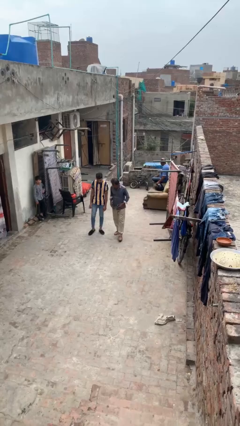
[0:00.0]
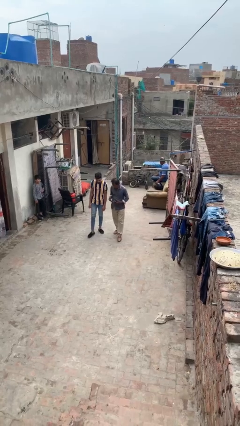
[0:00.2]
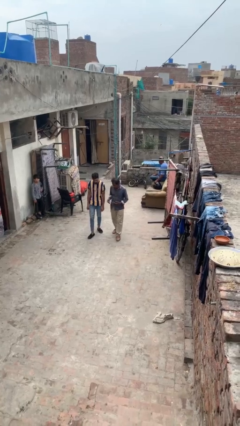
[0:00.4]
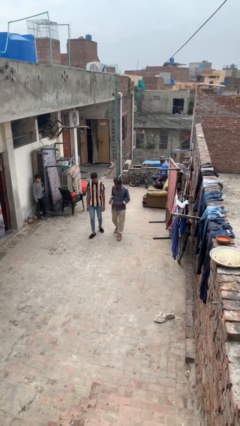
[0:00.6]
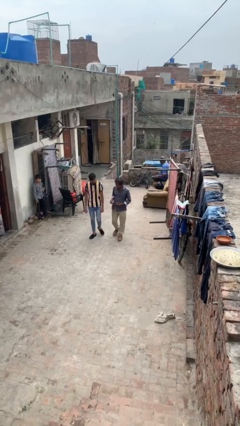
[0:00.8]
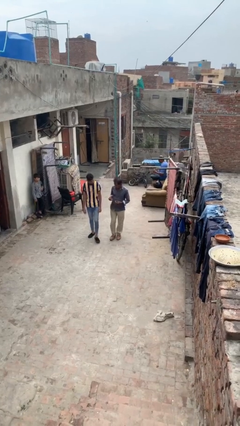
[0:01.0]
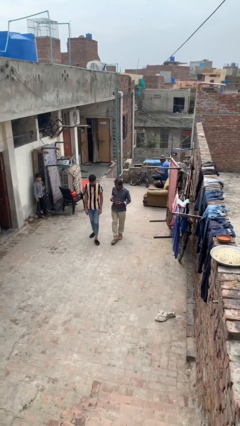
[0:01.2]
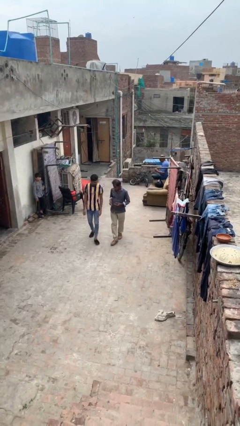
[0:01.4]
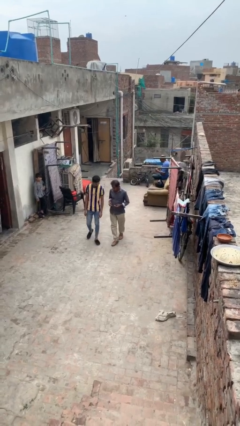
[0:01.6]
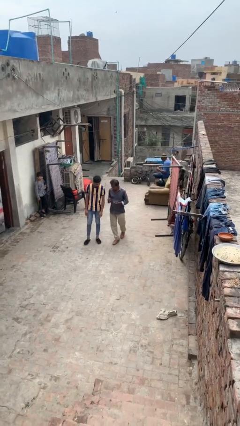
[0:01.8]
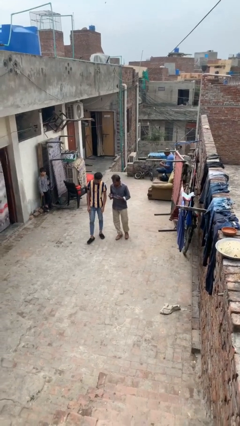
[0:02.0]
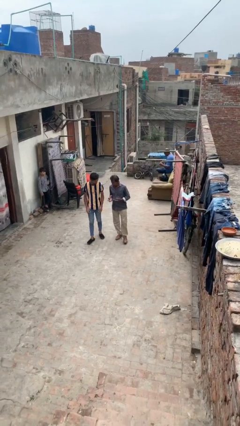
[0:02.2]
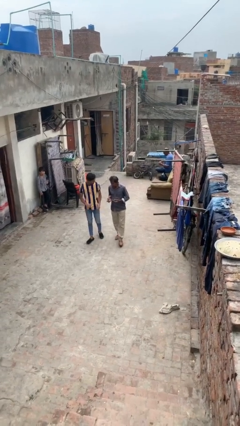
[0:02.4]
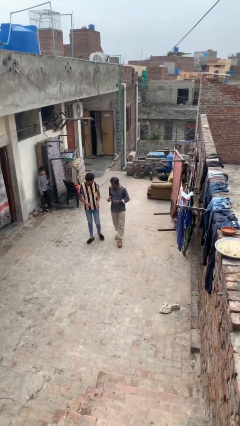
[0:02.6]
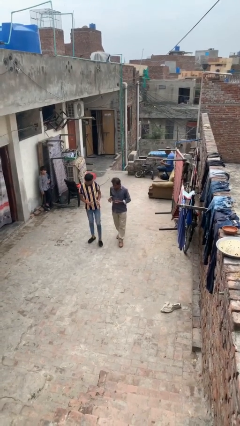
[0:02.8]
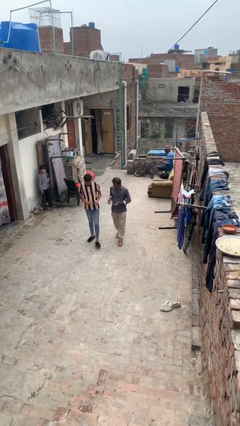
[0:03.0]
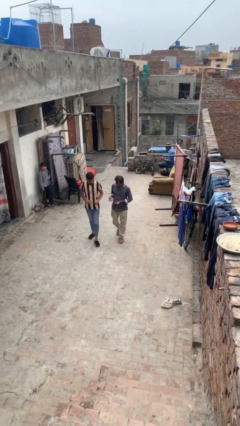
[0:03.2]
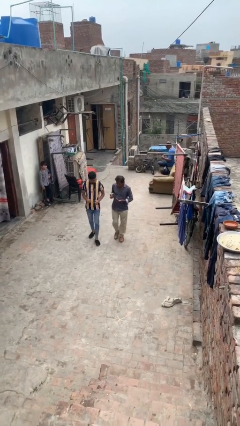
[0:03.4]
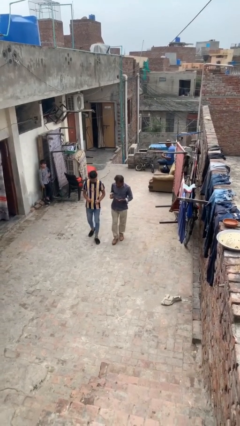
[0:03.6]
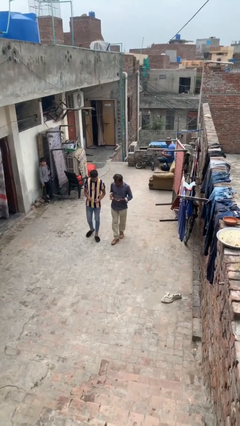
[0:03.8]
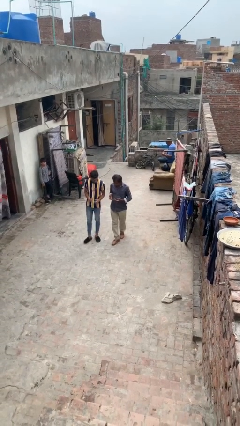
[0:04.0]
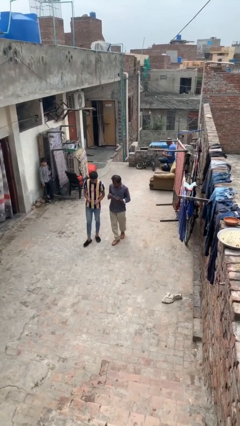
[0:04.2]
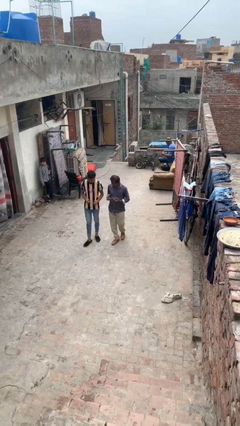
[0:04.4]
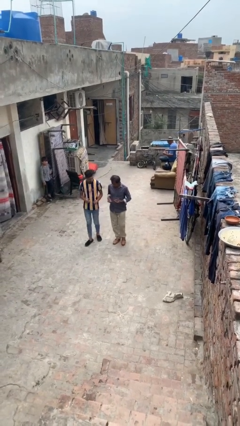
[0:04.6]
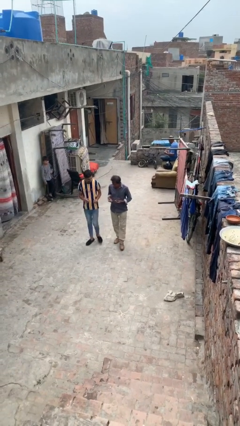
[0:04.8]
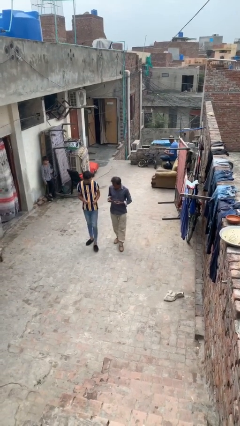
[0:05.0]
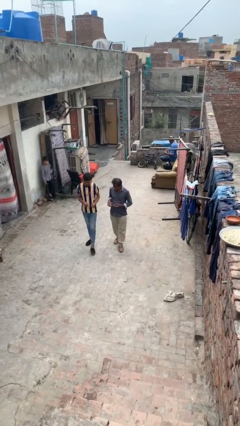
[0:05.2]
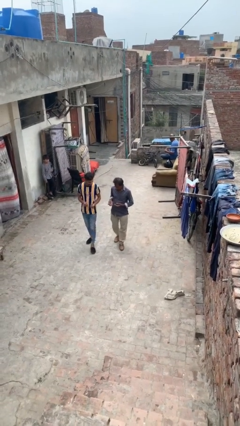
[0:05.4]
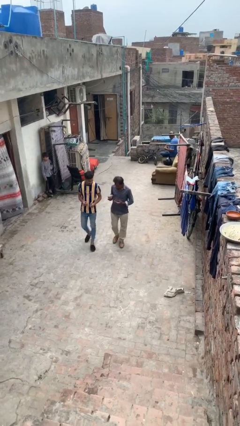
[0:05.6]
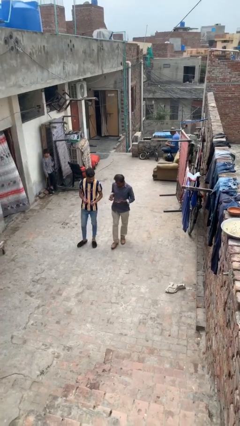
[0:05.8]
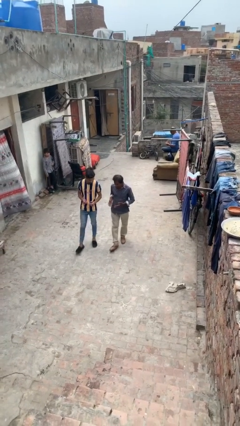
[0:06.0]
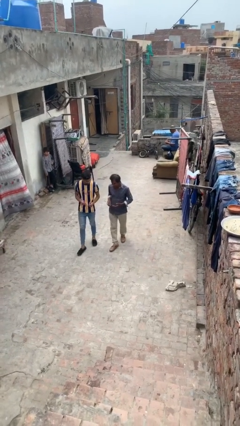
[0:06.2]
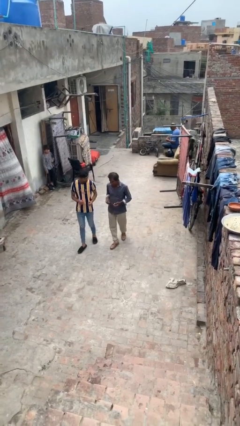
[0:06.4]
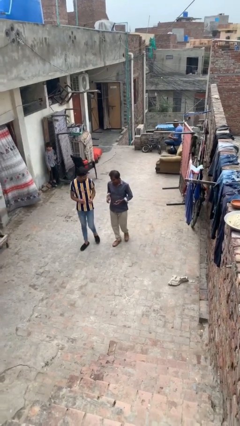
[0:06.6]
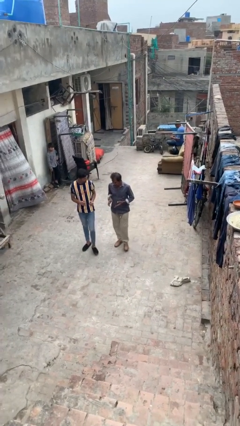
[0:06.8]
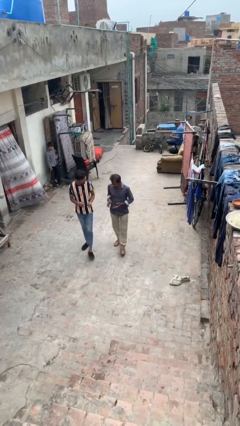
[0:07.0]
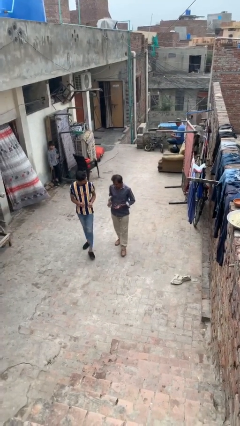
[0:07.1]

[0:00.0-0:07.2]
person talks to person

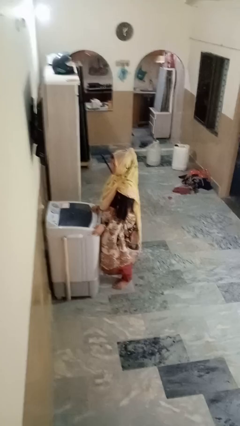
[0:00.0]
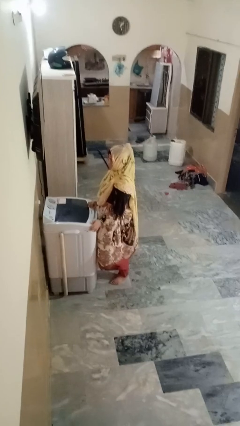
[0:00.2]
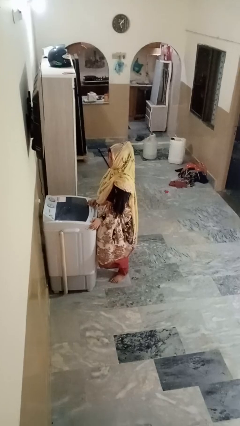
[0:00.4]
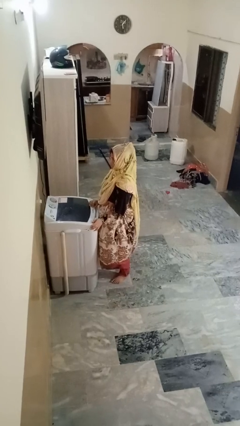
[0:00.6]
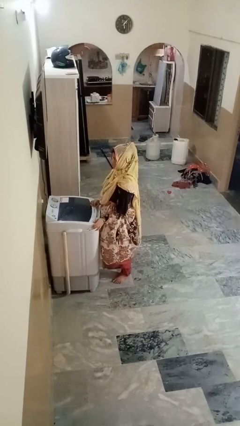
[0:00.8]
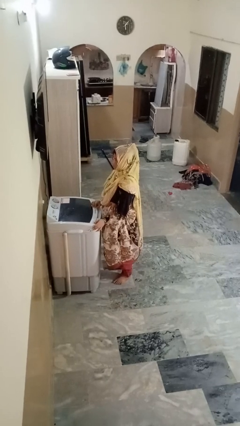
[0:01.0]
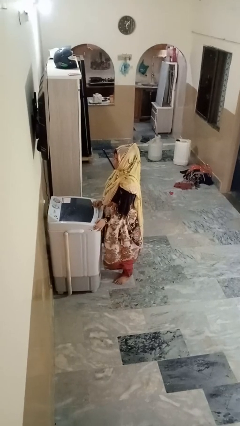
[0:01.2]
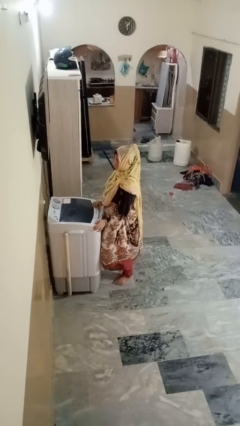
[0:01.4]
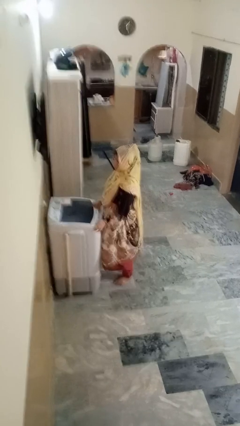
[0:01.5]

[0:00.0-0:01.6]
person closes clothes washer

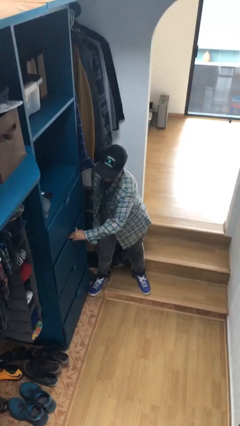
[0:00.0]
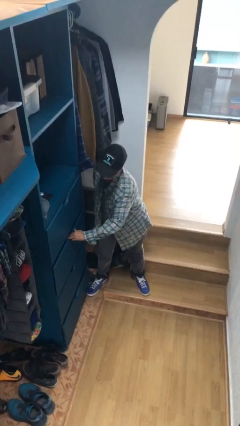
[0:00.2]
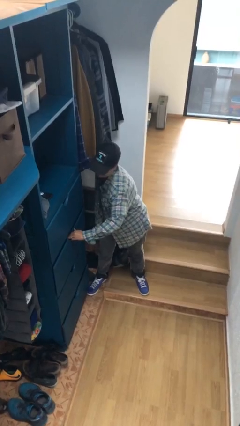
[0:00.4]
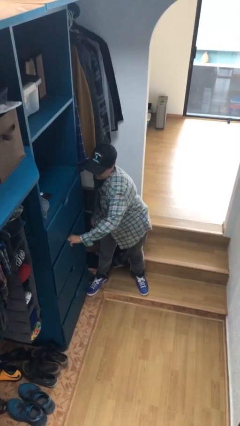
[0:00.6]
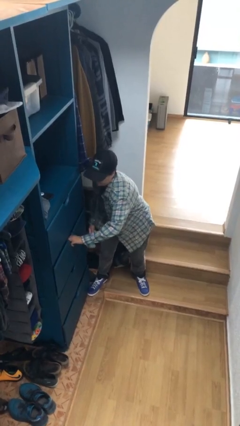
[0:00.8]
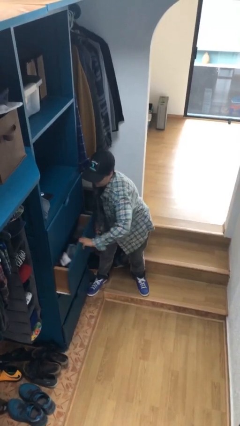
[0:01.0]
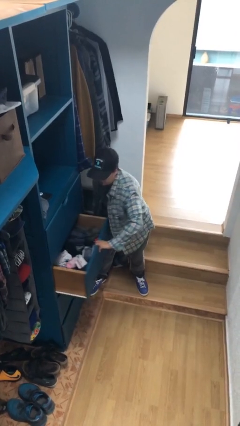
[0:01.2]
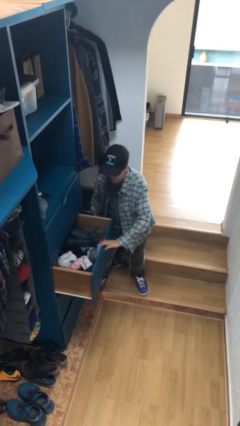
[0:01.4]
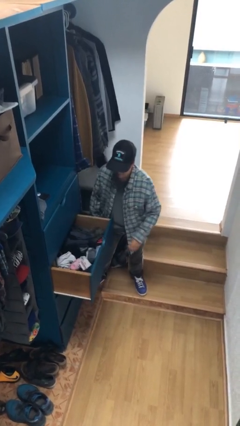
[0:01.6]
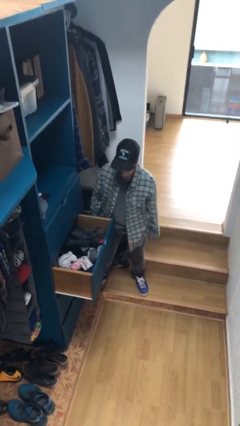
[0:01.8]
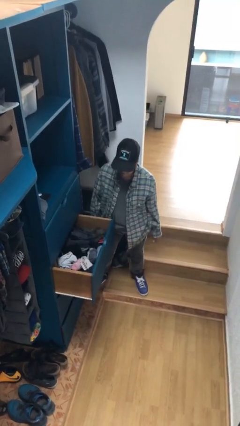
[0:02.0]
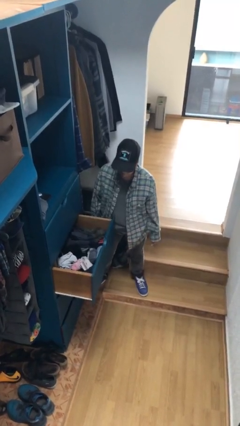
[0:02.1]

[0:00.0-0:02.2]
person opens dresser drawer

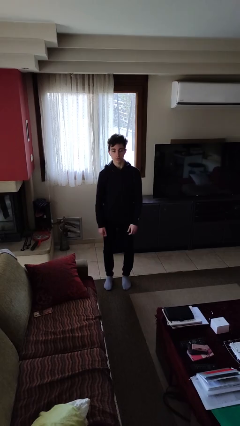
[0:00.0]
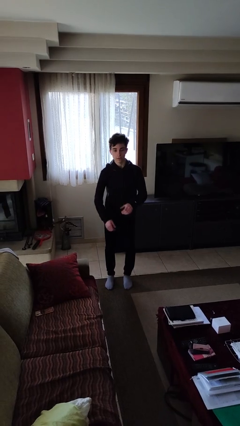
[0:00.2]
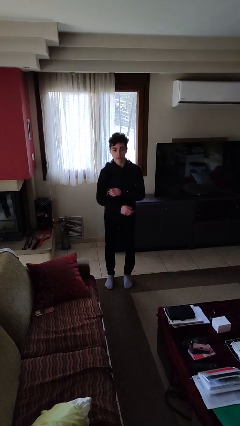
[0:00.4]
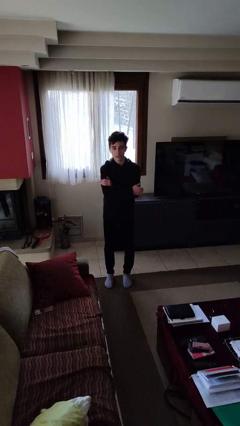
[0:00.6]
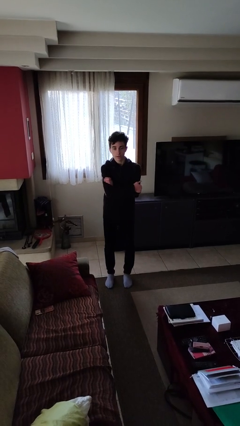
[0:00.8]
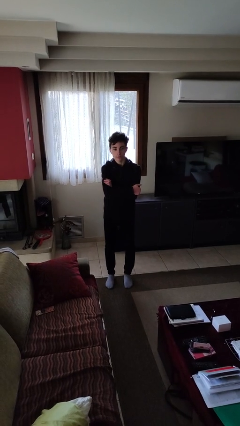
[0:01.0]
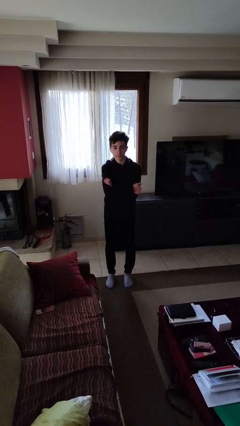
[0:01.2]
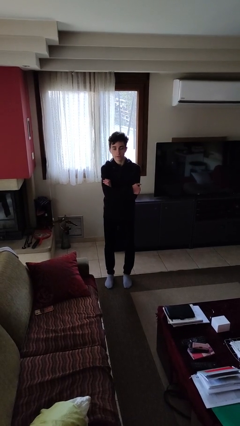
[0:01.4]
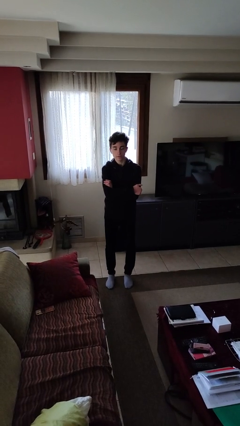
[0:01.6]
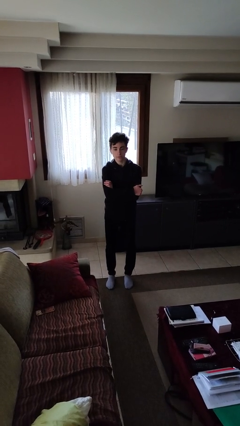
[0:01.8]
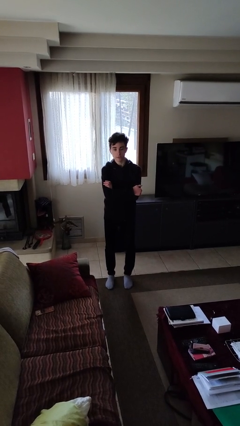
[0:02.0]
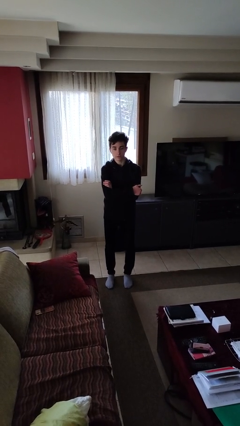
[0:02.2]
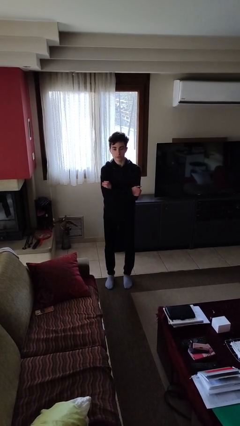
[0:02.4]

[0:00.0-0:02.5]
person crosses arms

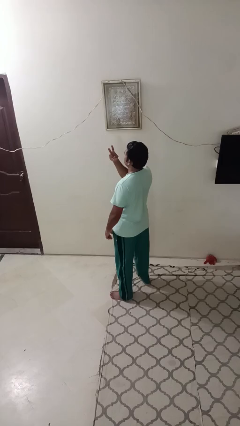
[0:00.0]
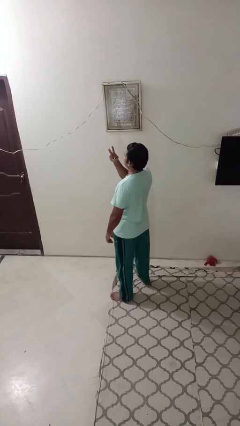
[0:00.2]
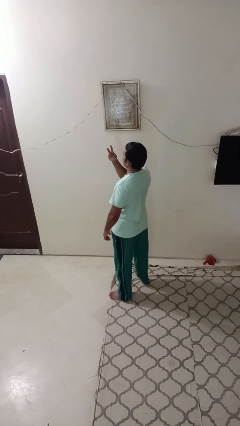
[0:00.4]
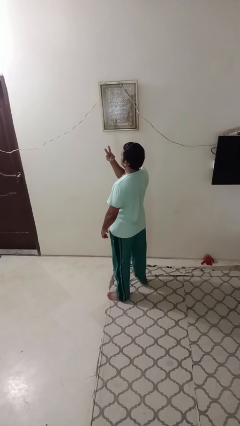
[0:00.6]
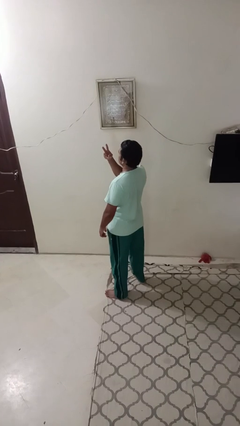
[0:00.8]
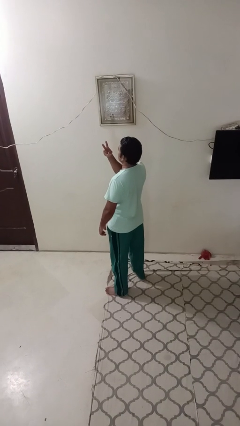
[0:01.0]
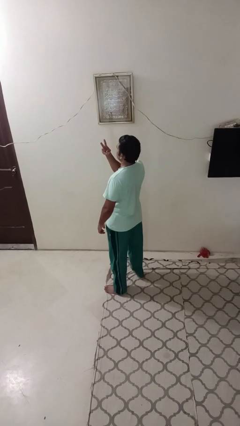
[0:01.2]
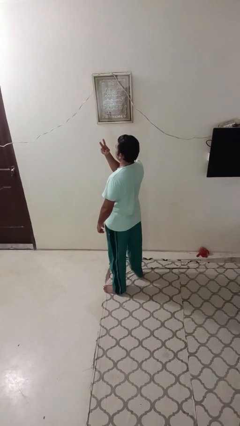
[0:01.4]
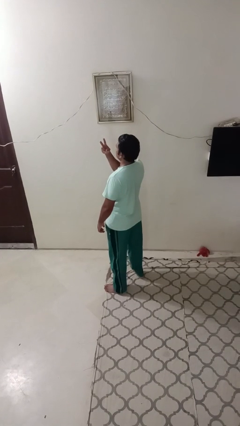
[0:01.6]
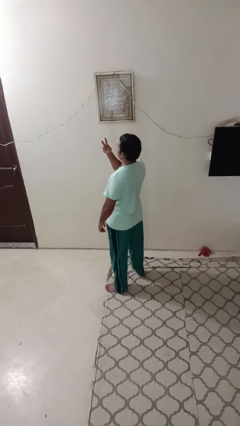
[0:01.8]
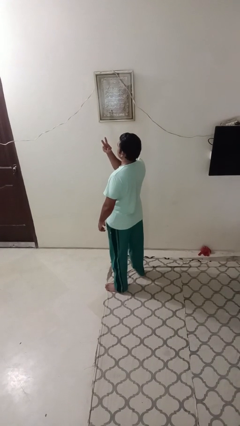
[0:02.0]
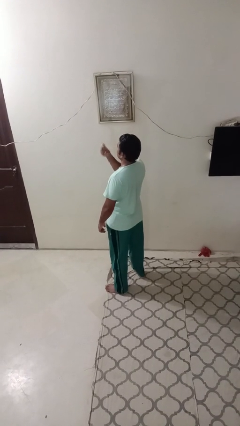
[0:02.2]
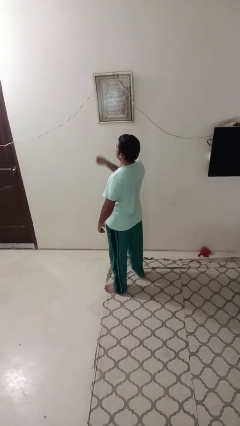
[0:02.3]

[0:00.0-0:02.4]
person gestures peace

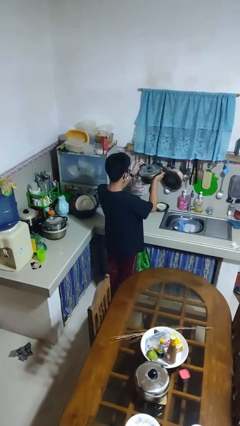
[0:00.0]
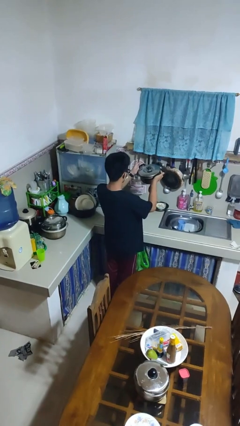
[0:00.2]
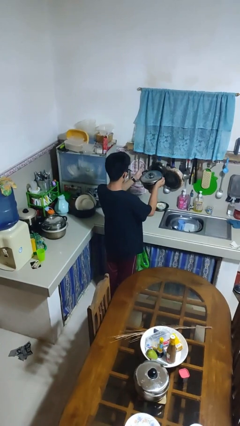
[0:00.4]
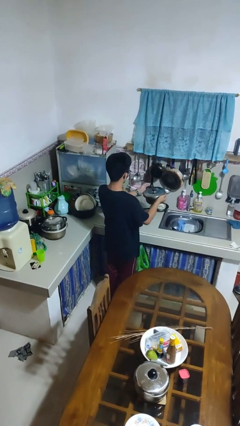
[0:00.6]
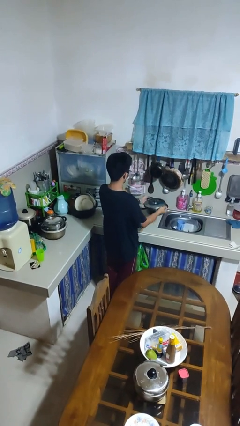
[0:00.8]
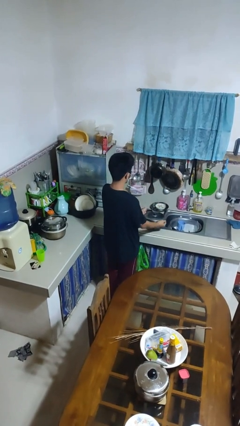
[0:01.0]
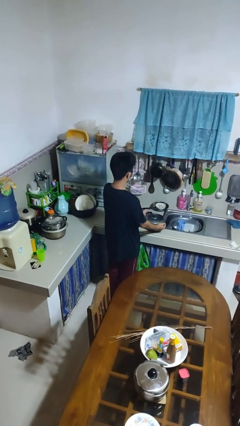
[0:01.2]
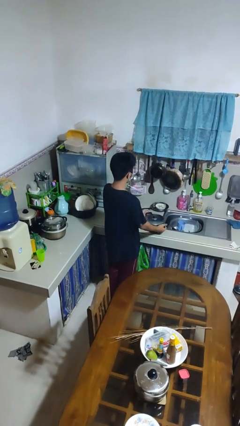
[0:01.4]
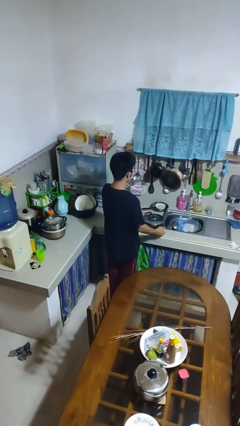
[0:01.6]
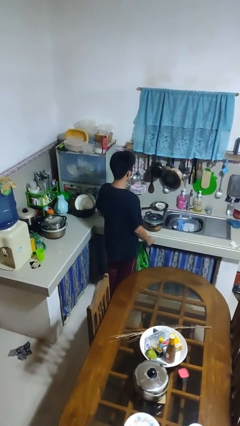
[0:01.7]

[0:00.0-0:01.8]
person puts down object on countertop
